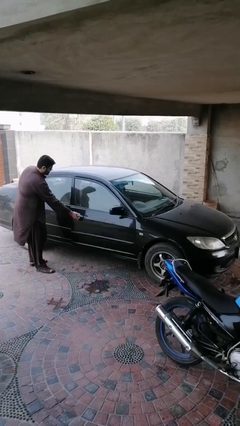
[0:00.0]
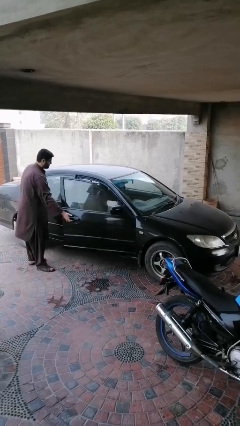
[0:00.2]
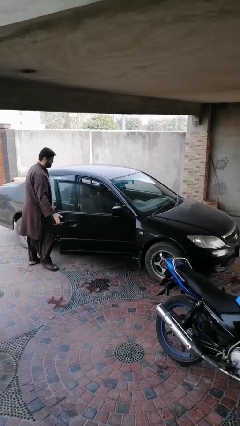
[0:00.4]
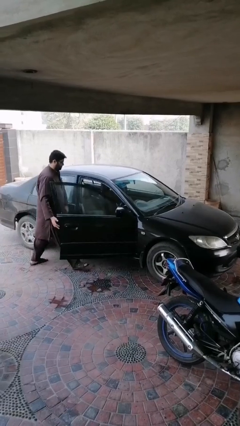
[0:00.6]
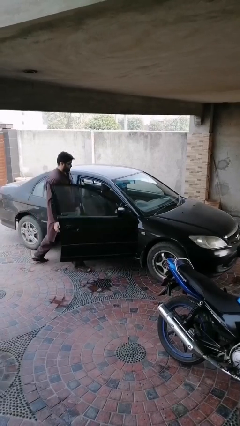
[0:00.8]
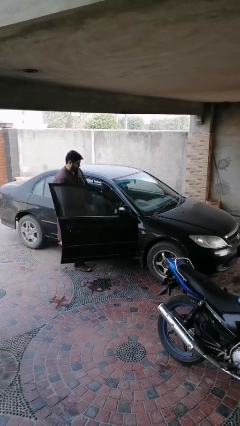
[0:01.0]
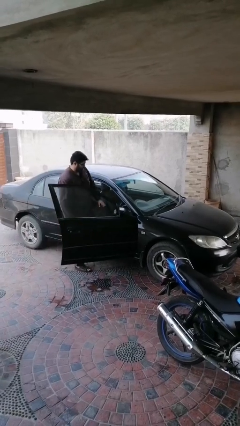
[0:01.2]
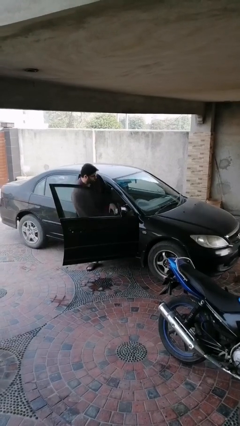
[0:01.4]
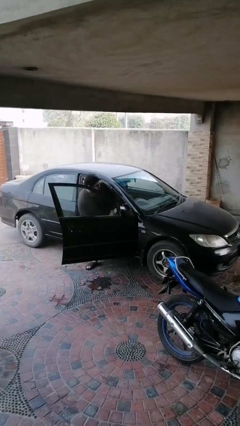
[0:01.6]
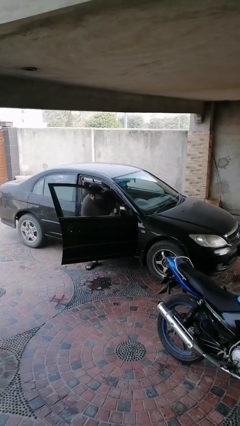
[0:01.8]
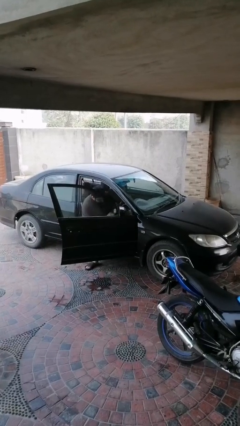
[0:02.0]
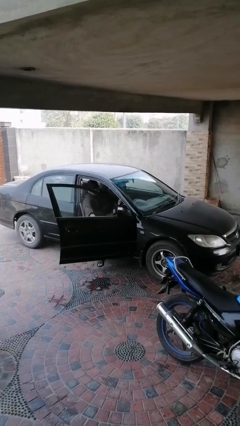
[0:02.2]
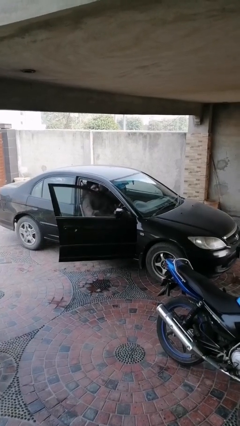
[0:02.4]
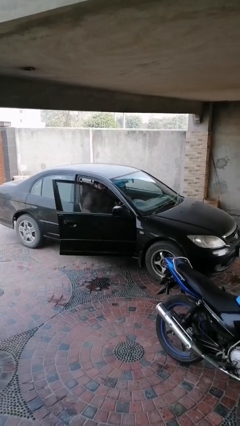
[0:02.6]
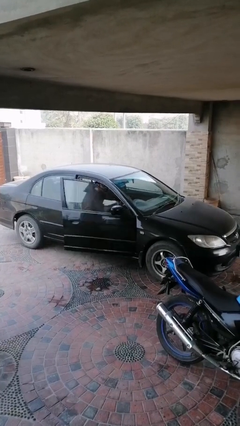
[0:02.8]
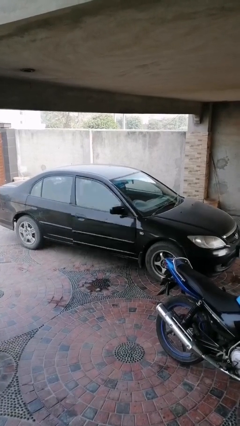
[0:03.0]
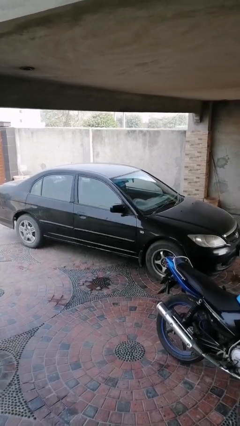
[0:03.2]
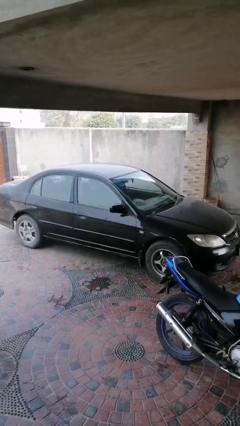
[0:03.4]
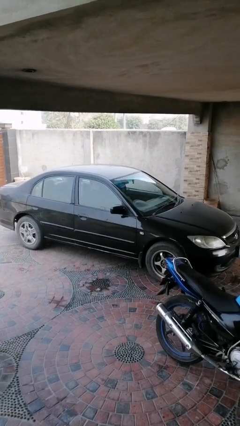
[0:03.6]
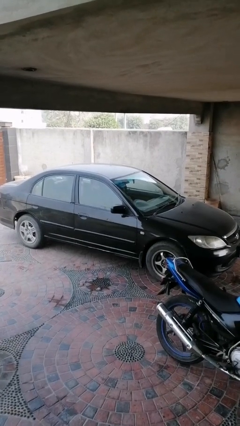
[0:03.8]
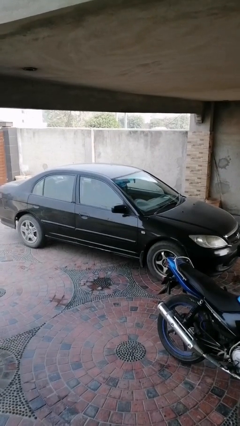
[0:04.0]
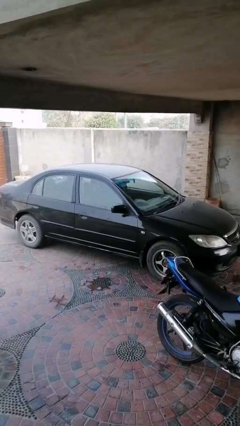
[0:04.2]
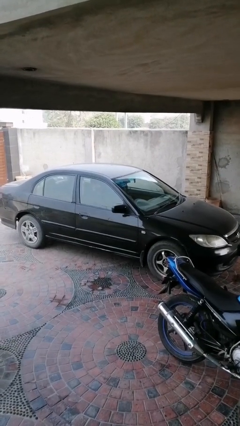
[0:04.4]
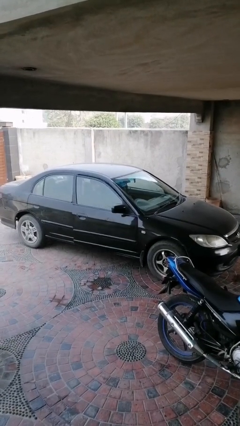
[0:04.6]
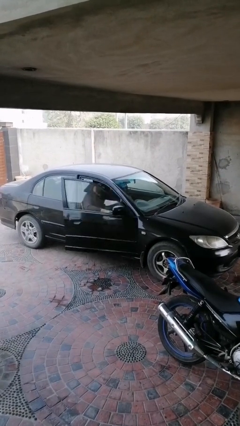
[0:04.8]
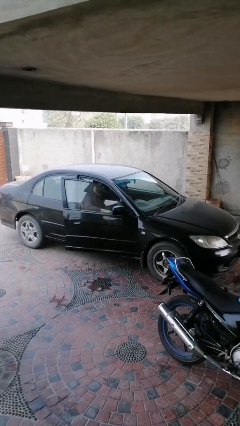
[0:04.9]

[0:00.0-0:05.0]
car picks up person

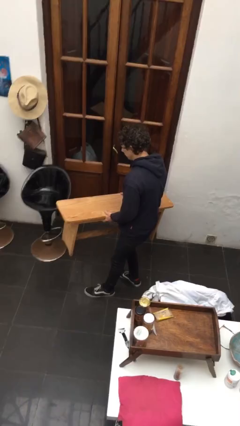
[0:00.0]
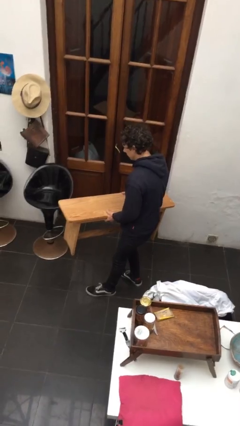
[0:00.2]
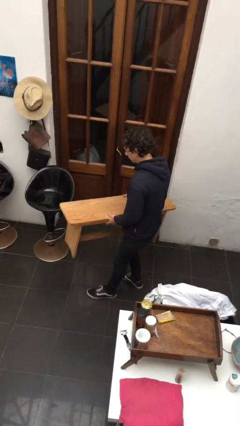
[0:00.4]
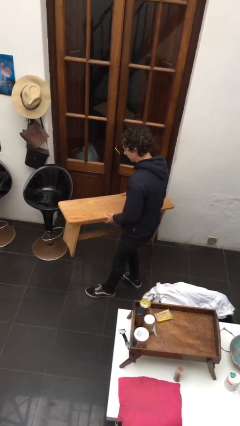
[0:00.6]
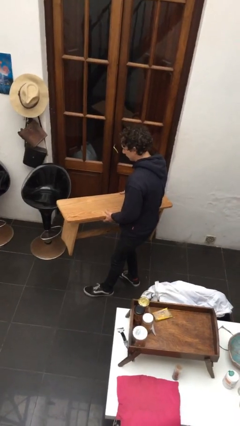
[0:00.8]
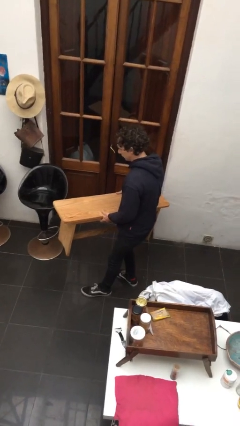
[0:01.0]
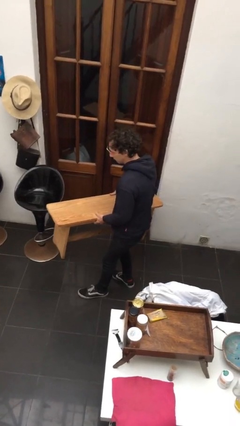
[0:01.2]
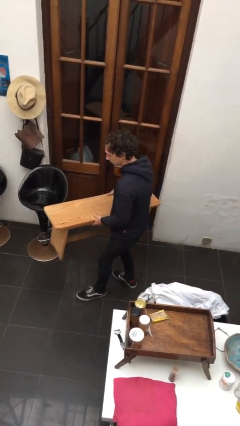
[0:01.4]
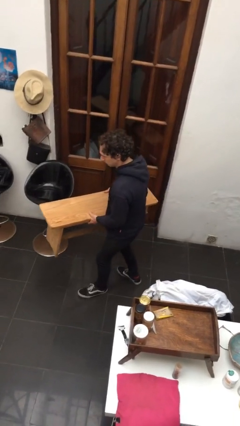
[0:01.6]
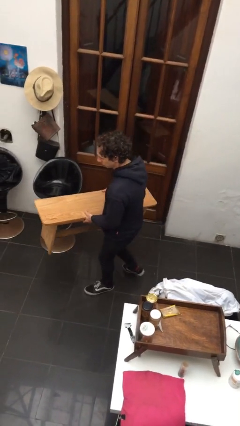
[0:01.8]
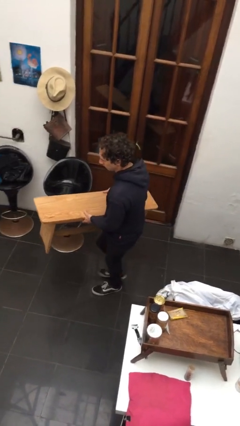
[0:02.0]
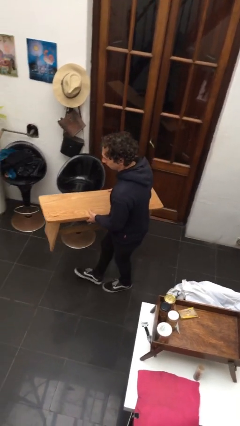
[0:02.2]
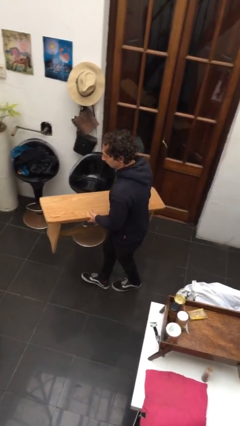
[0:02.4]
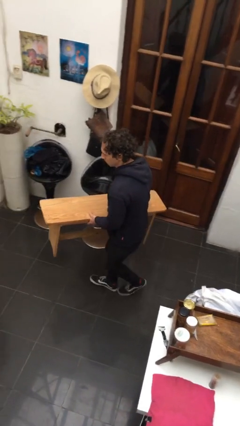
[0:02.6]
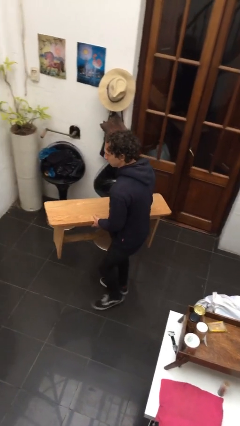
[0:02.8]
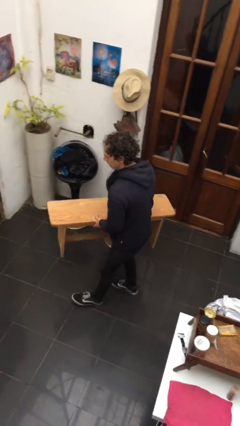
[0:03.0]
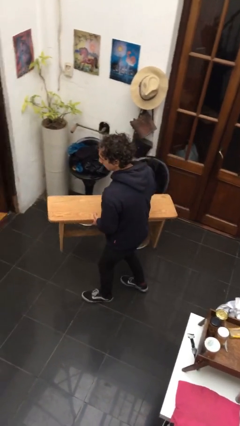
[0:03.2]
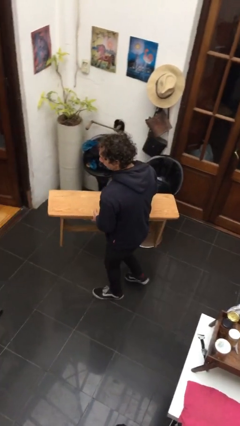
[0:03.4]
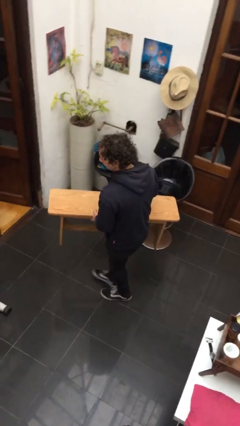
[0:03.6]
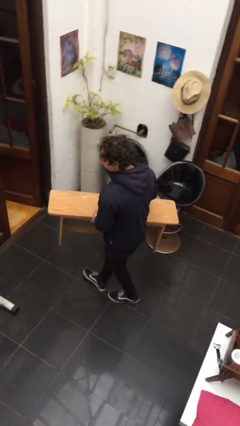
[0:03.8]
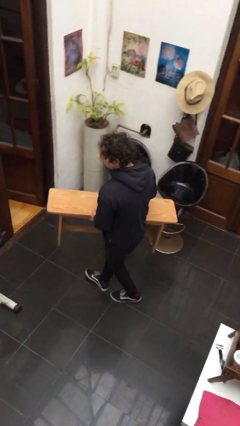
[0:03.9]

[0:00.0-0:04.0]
person carries furniture

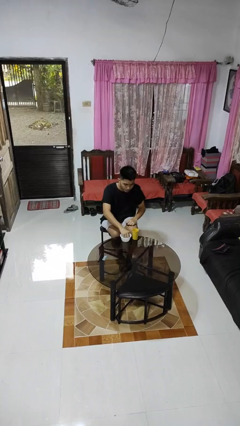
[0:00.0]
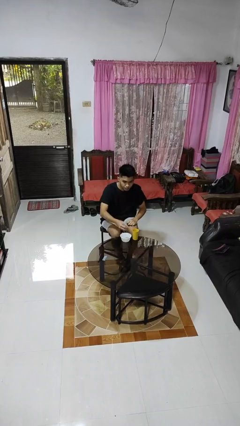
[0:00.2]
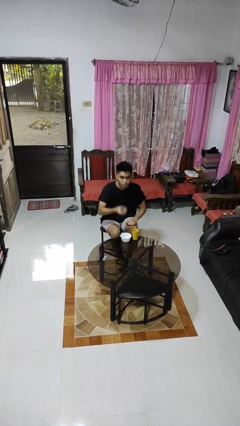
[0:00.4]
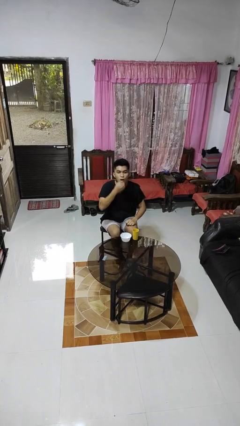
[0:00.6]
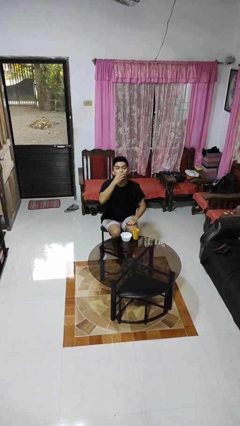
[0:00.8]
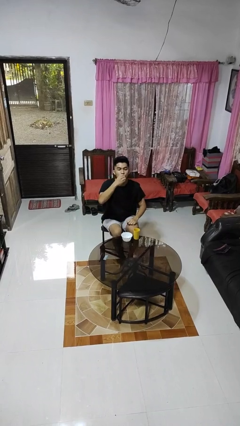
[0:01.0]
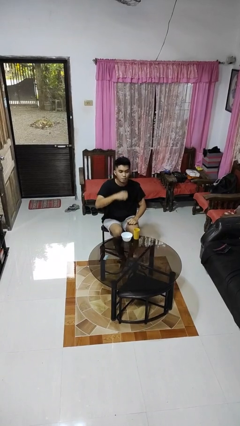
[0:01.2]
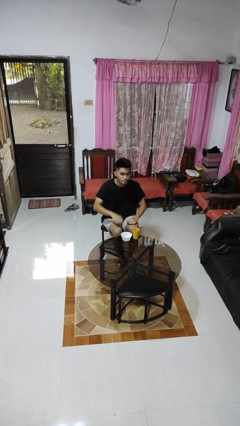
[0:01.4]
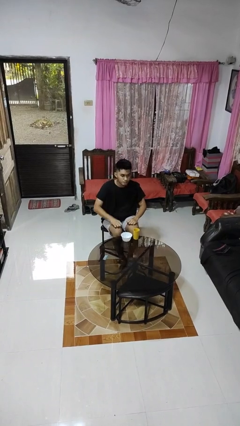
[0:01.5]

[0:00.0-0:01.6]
person takes medicine pills

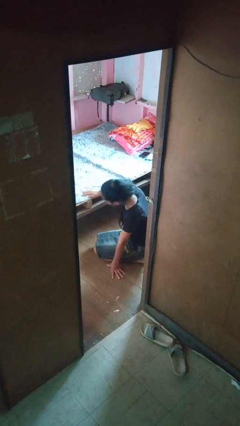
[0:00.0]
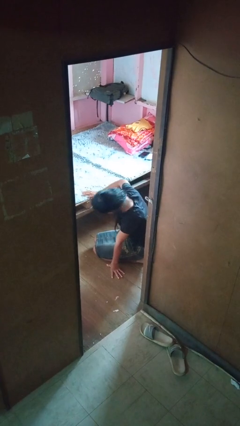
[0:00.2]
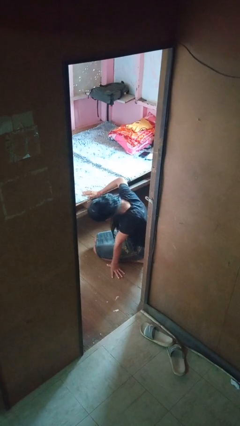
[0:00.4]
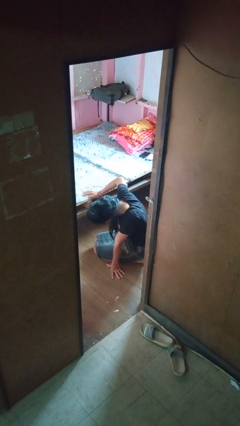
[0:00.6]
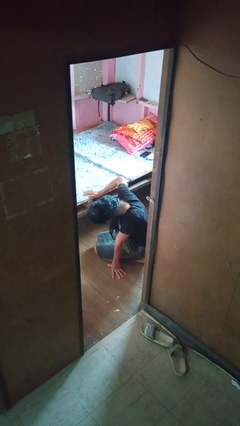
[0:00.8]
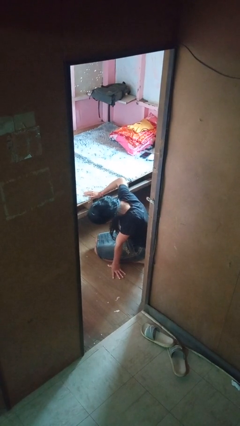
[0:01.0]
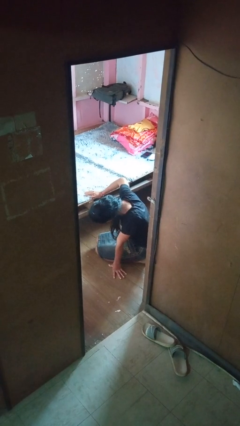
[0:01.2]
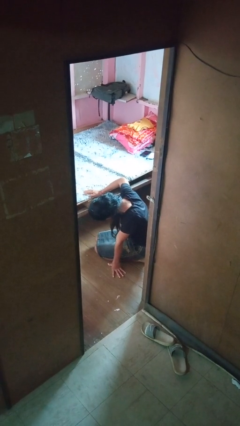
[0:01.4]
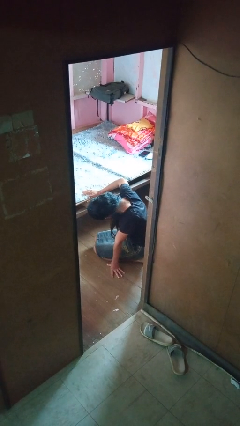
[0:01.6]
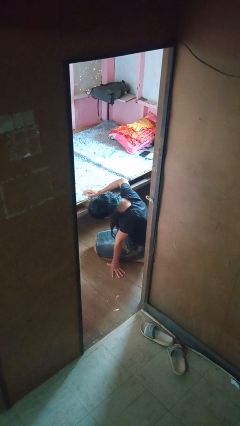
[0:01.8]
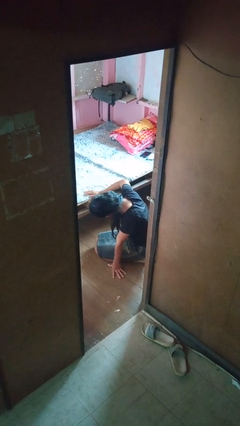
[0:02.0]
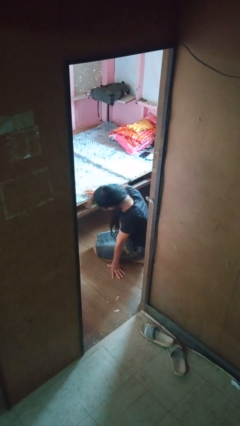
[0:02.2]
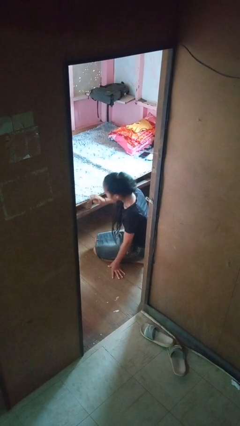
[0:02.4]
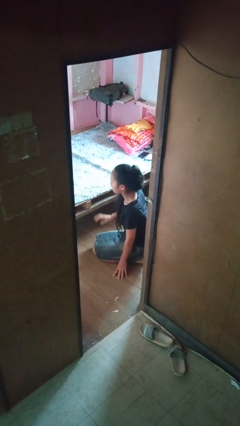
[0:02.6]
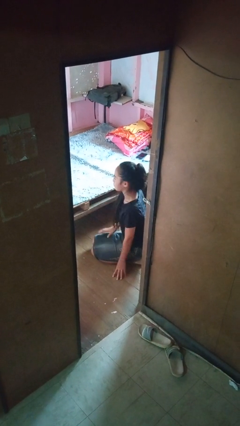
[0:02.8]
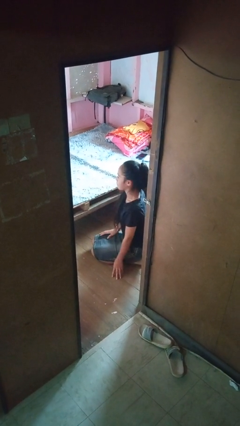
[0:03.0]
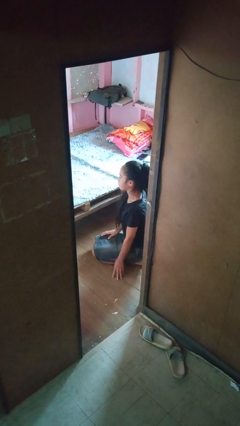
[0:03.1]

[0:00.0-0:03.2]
person searches under bed

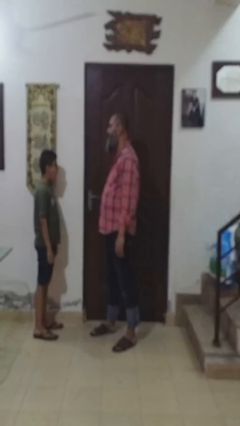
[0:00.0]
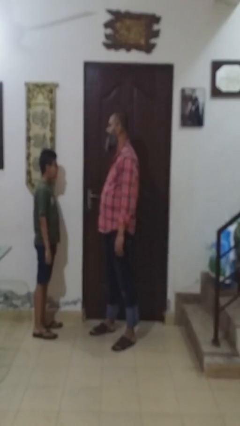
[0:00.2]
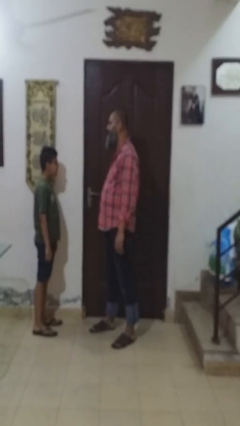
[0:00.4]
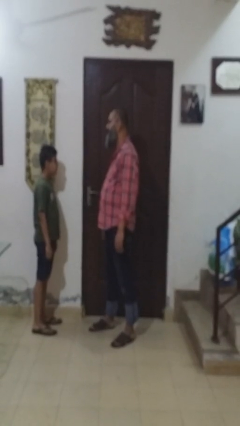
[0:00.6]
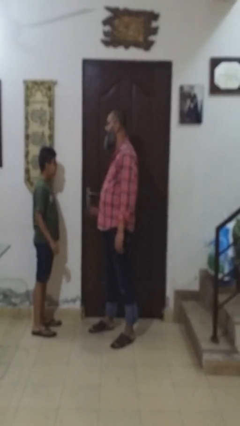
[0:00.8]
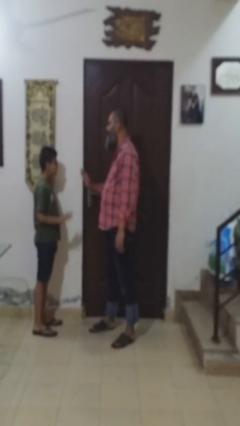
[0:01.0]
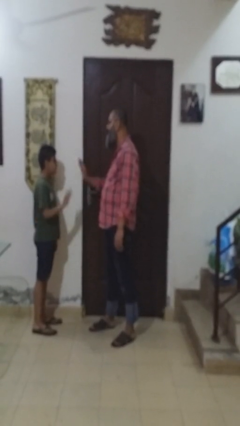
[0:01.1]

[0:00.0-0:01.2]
person highfives hand

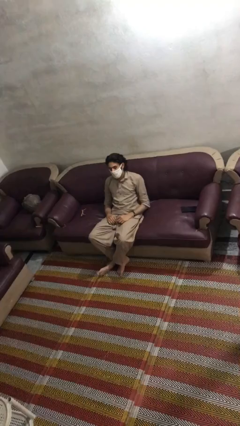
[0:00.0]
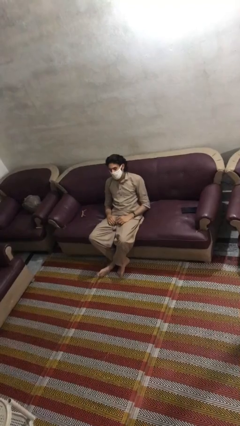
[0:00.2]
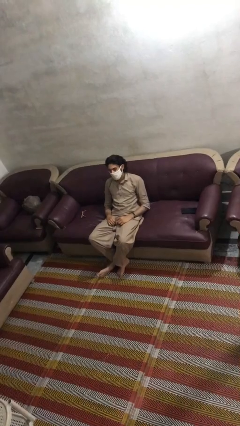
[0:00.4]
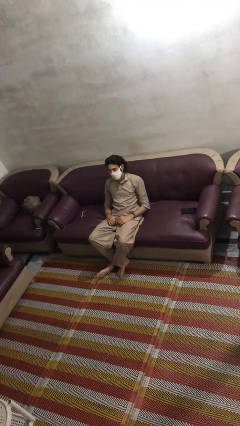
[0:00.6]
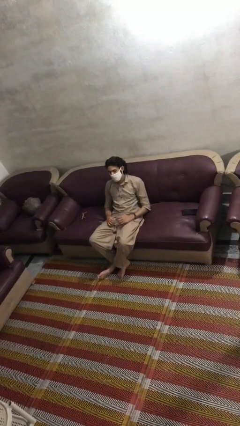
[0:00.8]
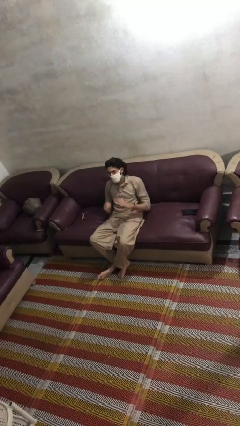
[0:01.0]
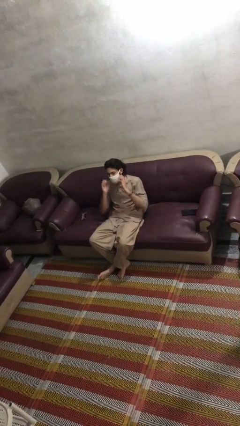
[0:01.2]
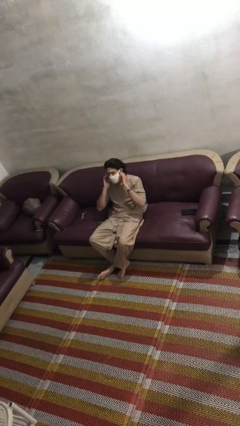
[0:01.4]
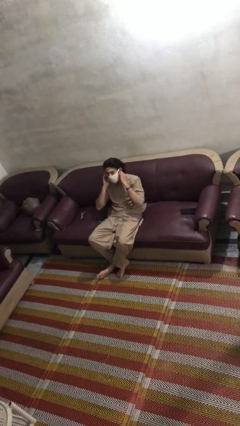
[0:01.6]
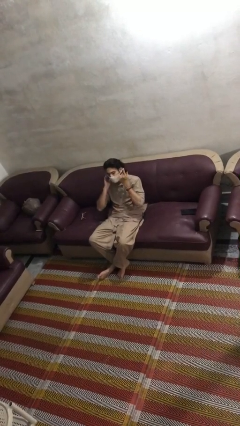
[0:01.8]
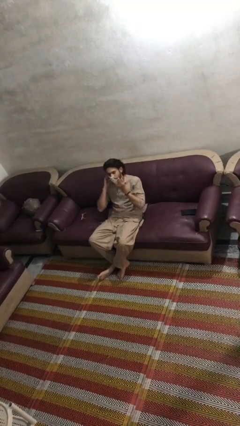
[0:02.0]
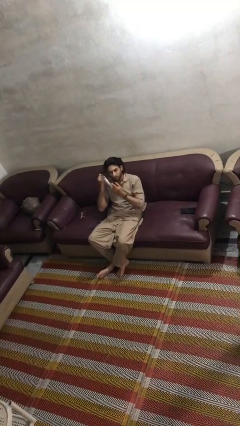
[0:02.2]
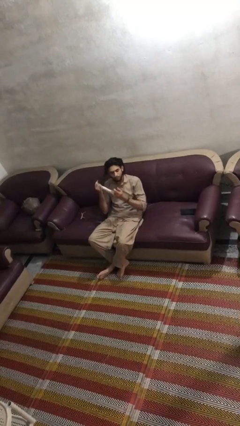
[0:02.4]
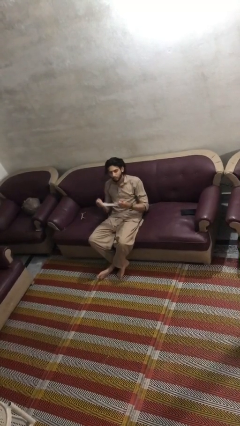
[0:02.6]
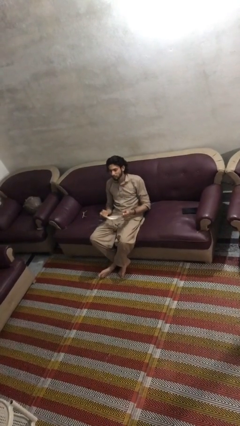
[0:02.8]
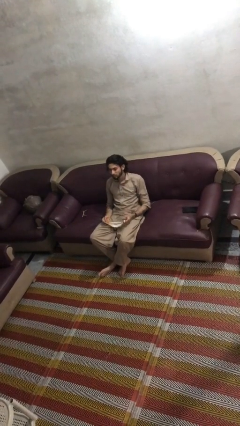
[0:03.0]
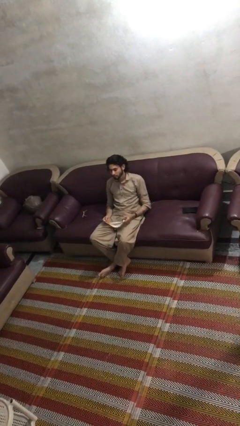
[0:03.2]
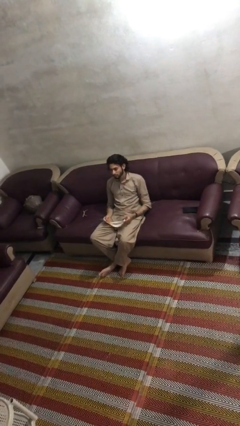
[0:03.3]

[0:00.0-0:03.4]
person takes off facemask
